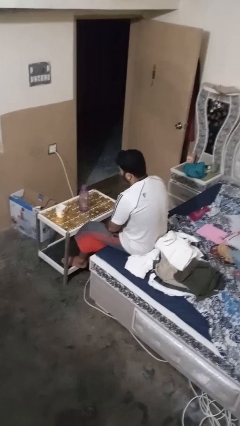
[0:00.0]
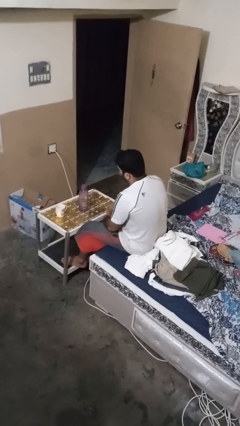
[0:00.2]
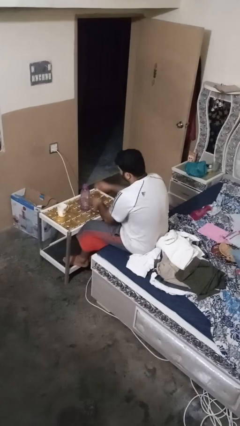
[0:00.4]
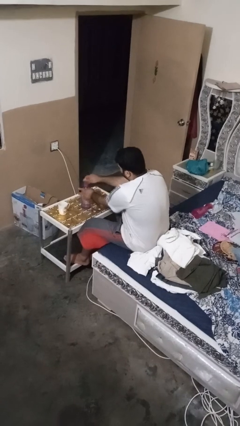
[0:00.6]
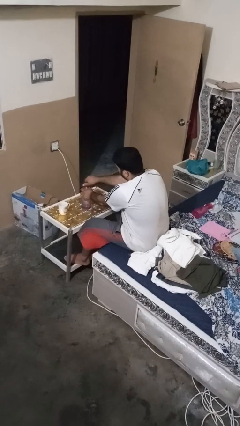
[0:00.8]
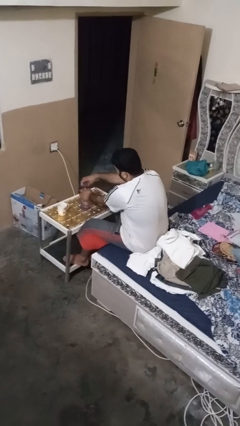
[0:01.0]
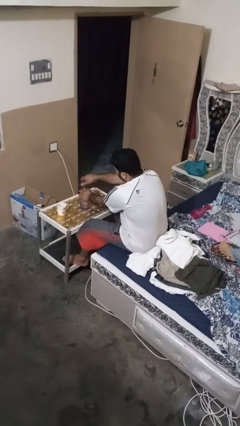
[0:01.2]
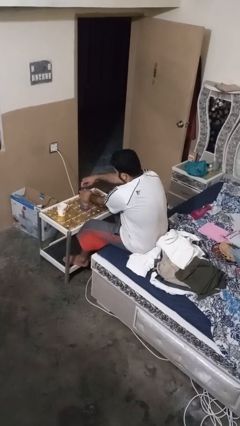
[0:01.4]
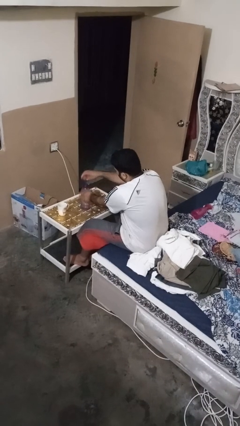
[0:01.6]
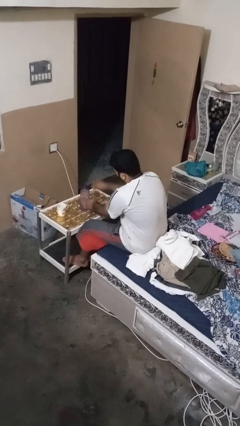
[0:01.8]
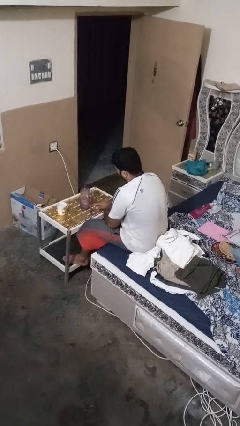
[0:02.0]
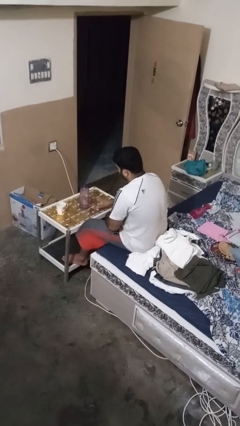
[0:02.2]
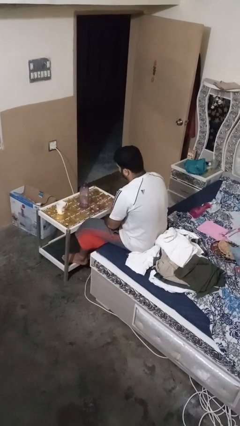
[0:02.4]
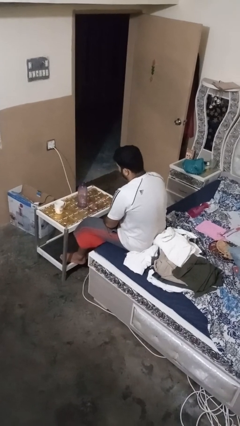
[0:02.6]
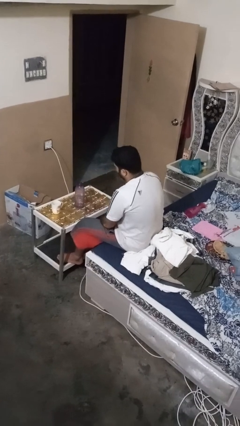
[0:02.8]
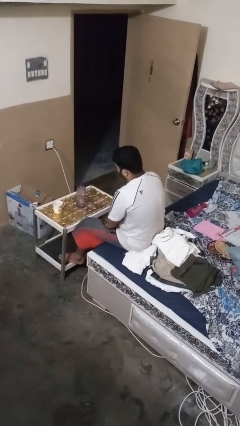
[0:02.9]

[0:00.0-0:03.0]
person unscrews lid from bottle

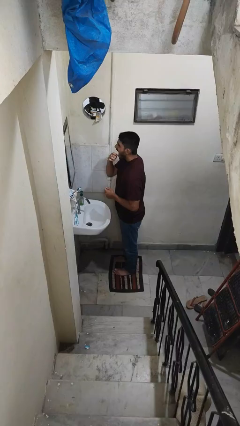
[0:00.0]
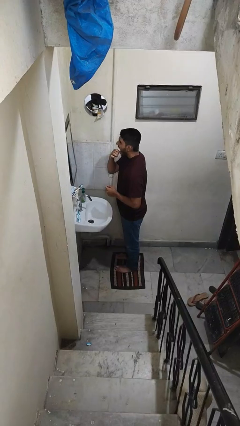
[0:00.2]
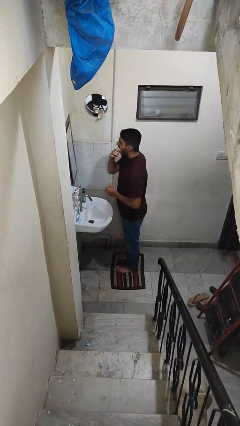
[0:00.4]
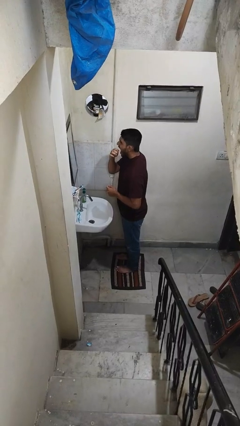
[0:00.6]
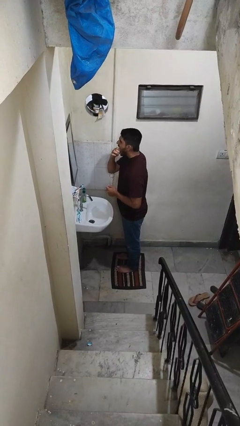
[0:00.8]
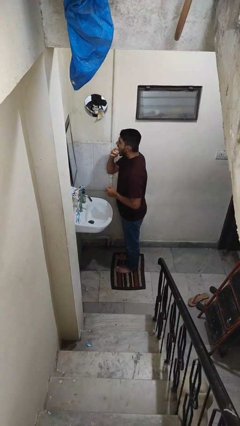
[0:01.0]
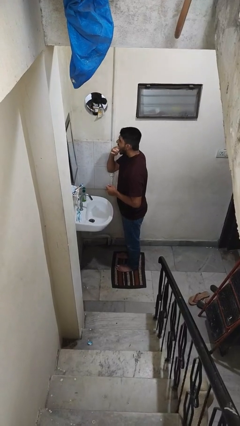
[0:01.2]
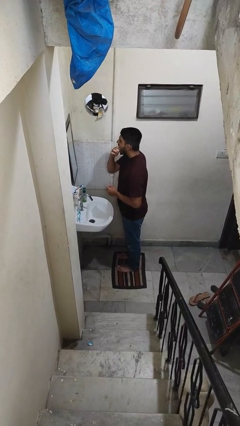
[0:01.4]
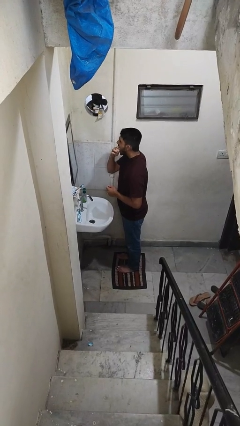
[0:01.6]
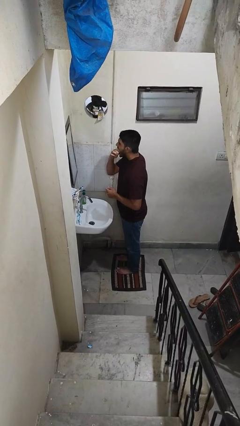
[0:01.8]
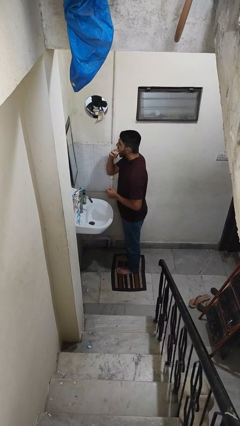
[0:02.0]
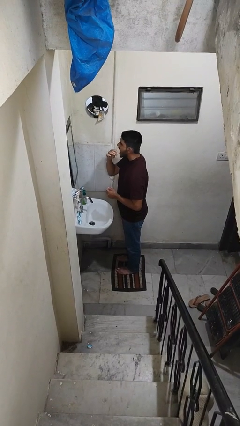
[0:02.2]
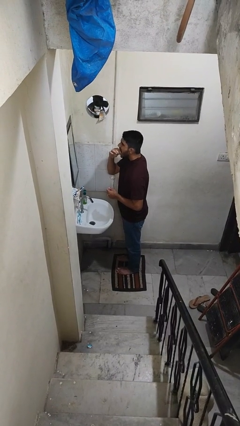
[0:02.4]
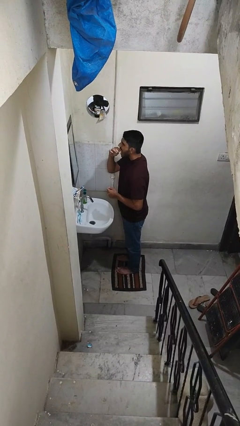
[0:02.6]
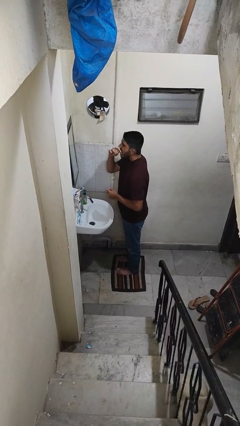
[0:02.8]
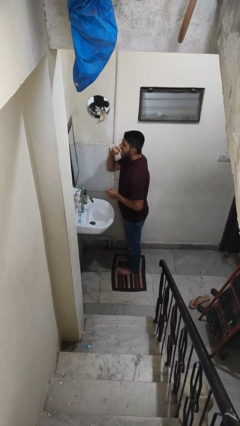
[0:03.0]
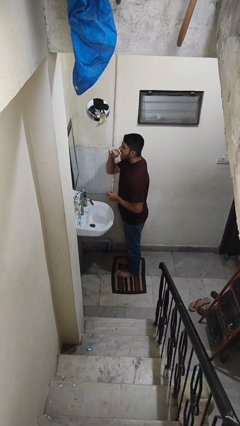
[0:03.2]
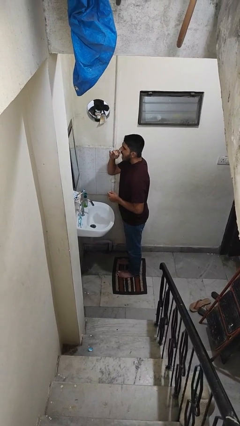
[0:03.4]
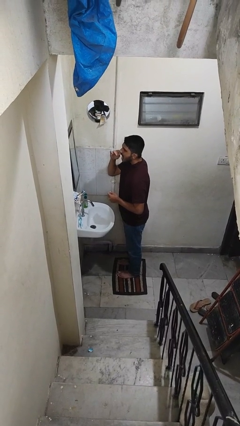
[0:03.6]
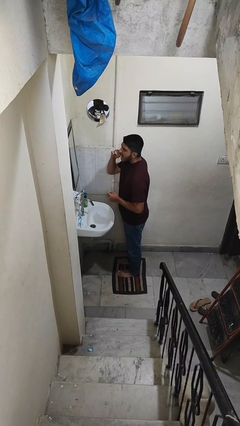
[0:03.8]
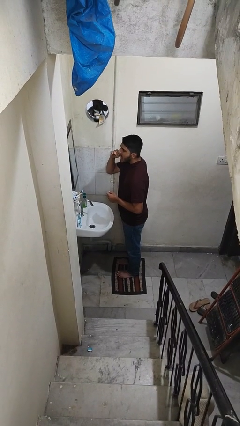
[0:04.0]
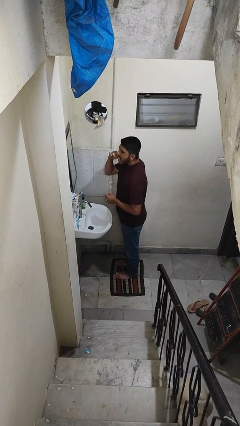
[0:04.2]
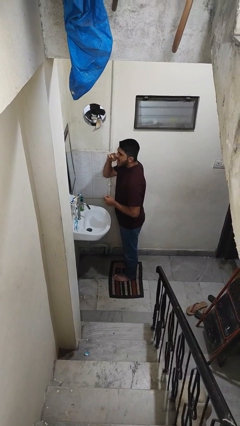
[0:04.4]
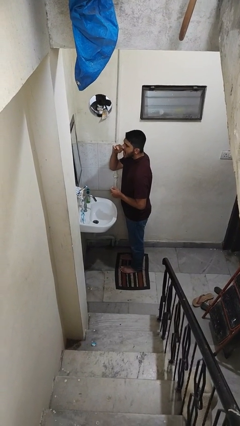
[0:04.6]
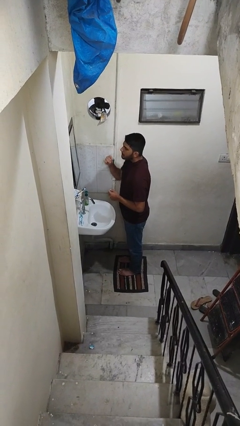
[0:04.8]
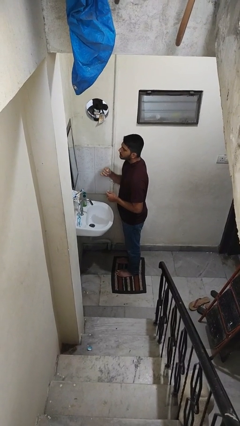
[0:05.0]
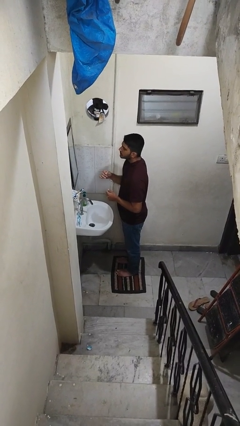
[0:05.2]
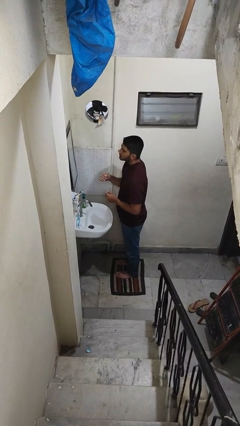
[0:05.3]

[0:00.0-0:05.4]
person flosses

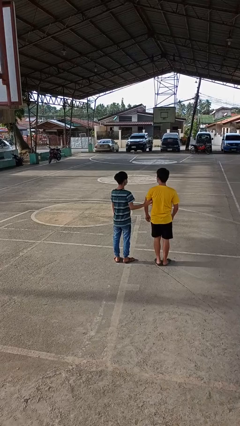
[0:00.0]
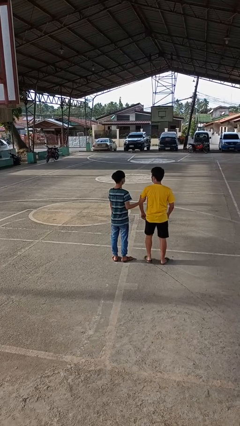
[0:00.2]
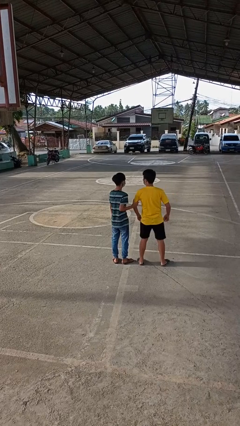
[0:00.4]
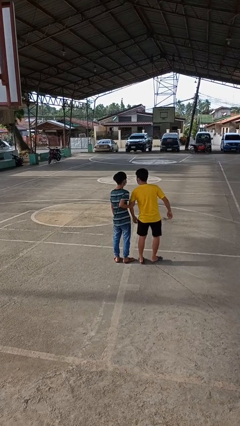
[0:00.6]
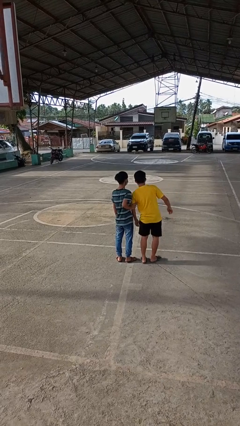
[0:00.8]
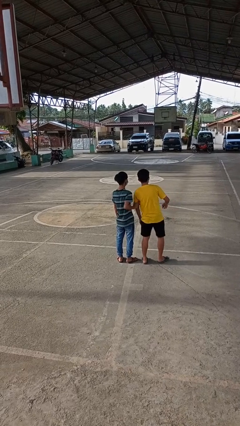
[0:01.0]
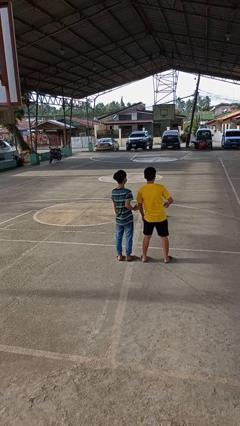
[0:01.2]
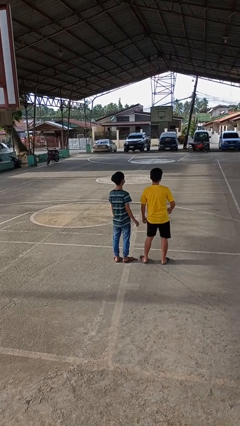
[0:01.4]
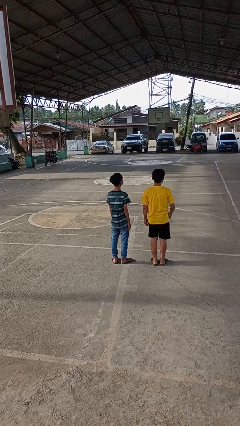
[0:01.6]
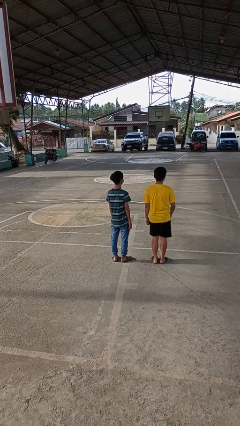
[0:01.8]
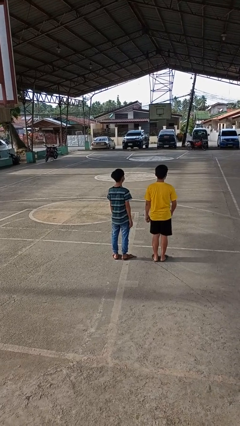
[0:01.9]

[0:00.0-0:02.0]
person grabs person by bicep

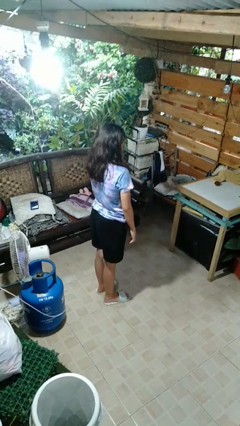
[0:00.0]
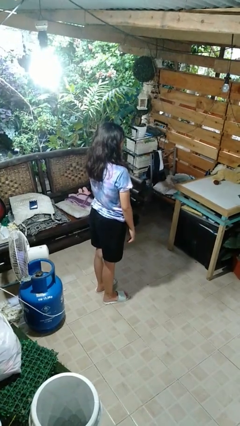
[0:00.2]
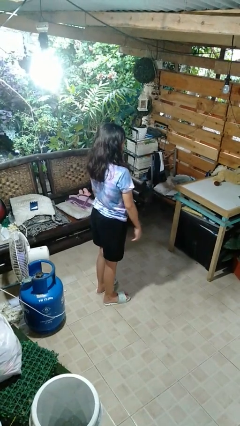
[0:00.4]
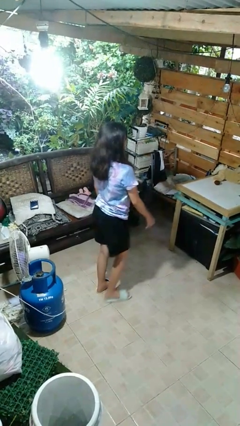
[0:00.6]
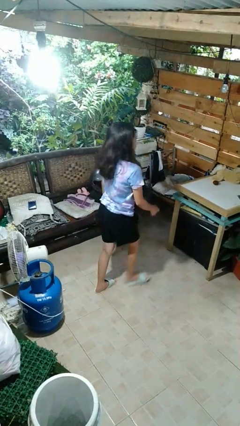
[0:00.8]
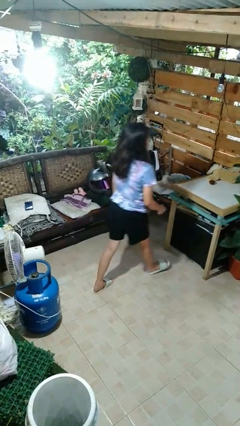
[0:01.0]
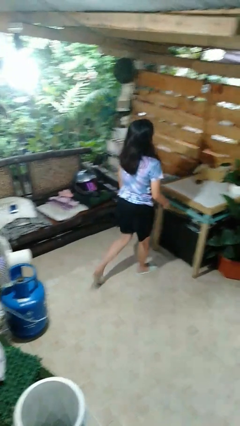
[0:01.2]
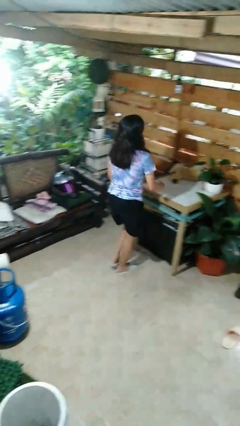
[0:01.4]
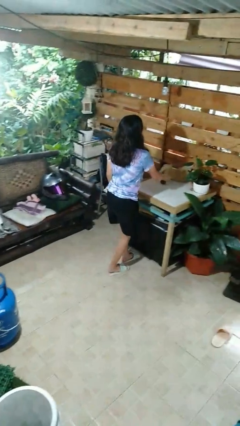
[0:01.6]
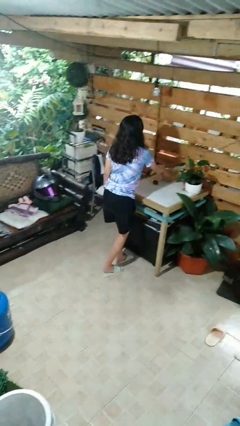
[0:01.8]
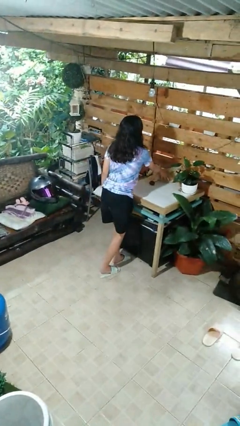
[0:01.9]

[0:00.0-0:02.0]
person picks up object from table

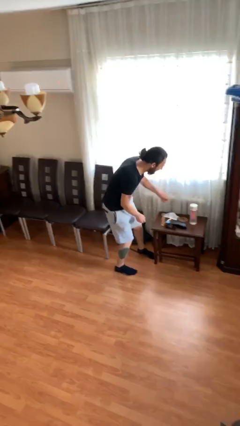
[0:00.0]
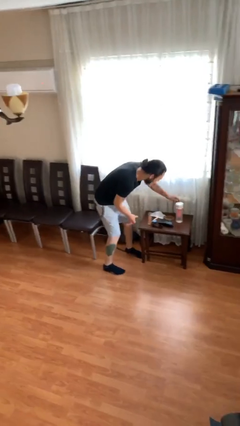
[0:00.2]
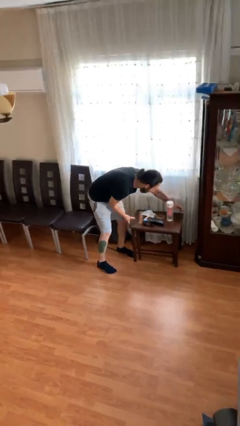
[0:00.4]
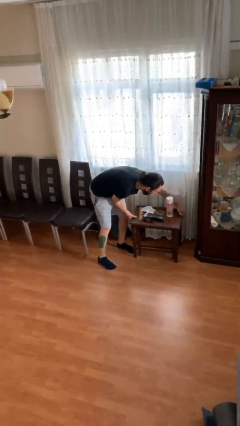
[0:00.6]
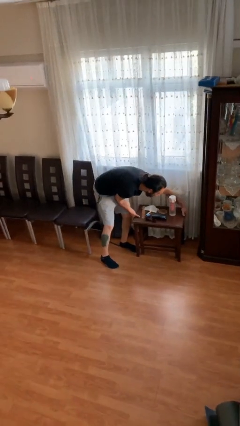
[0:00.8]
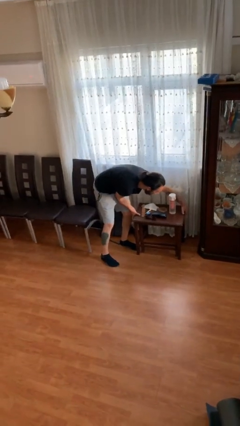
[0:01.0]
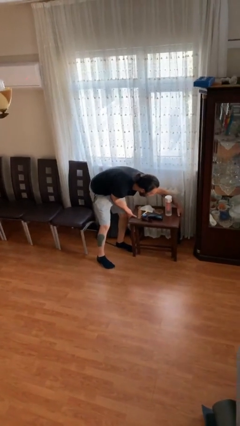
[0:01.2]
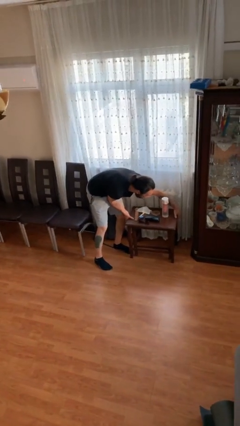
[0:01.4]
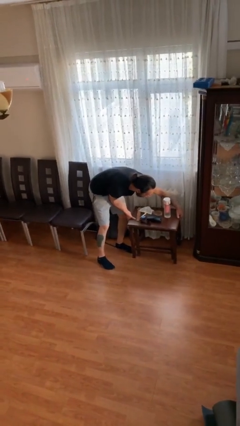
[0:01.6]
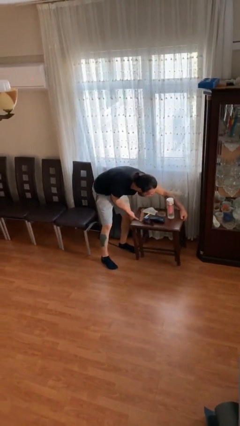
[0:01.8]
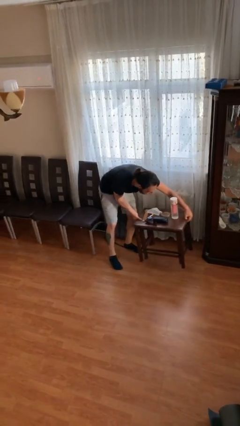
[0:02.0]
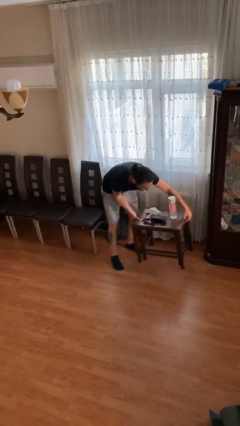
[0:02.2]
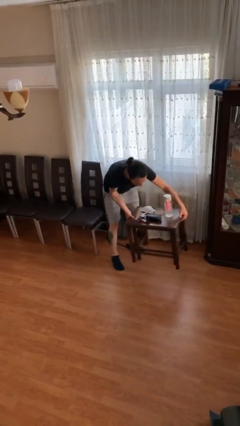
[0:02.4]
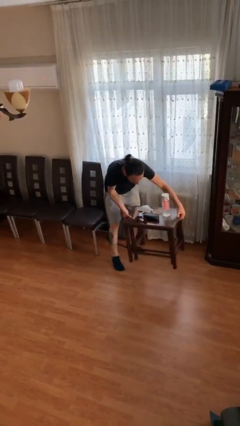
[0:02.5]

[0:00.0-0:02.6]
person picks up object from floor

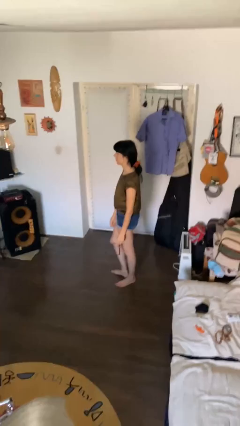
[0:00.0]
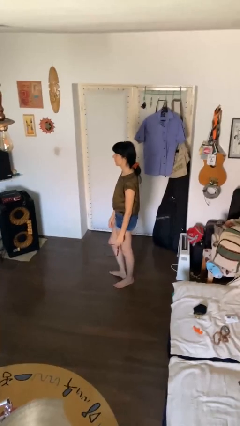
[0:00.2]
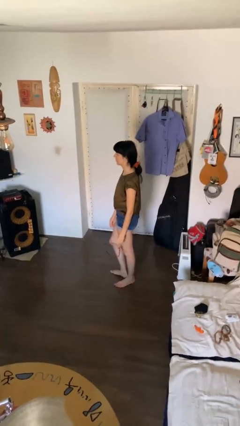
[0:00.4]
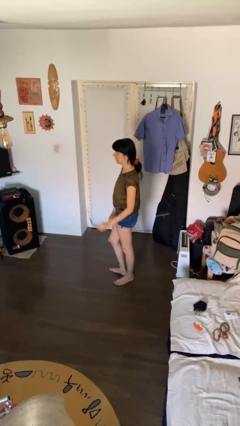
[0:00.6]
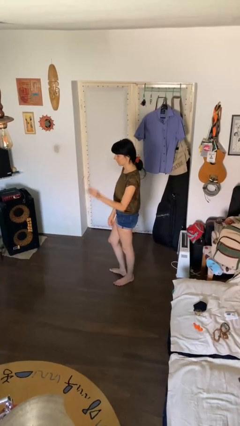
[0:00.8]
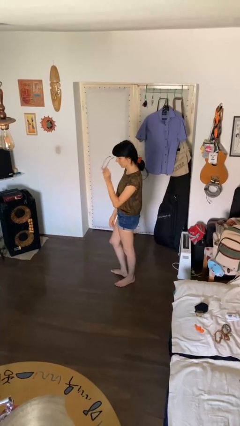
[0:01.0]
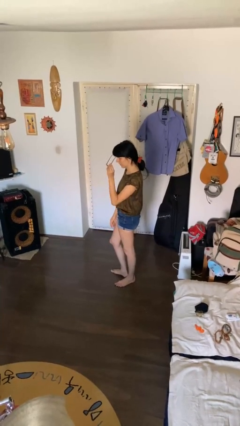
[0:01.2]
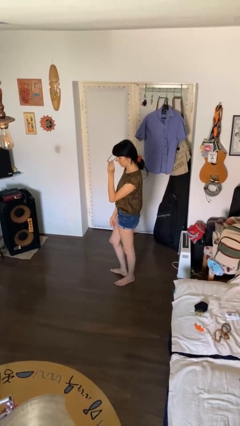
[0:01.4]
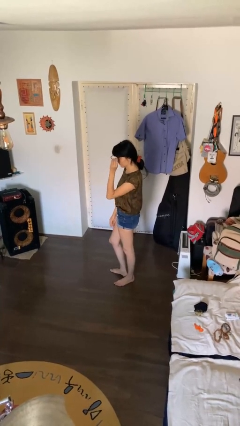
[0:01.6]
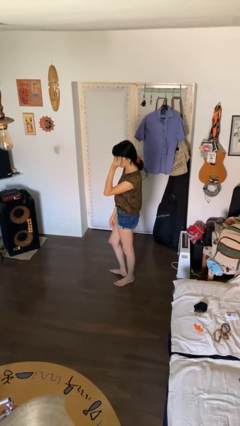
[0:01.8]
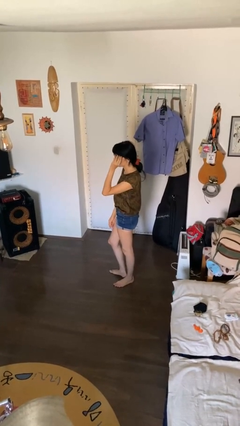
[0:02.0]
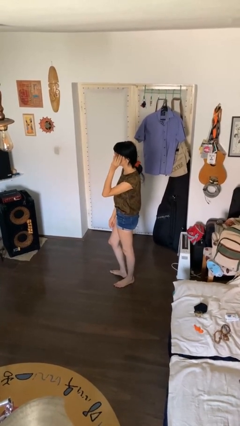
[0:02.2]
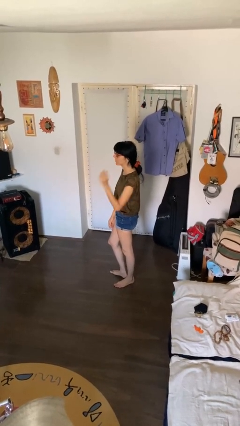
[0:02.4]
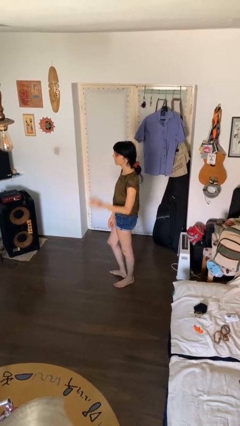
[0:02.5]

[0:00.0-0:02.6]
person puts on sunglasses
